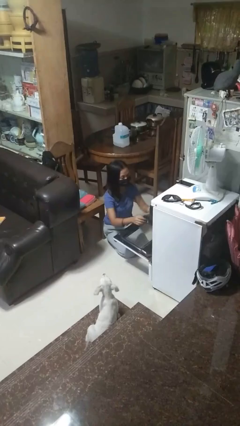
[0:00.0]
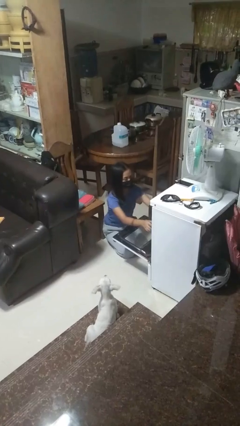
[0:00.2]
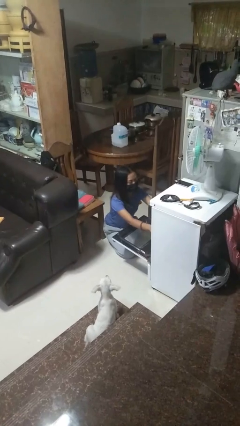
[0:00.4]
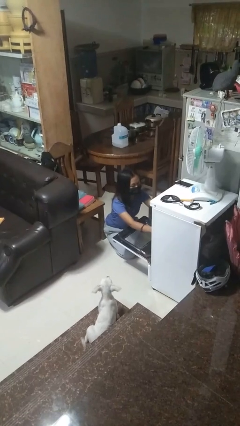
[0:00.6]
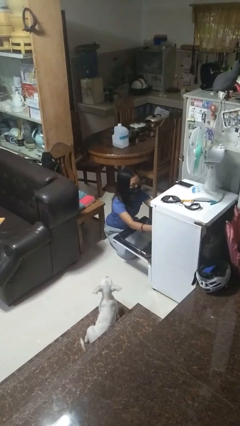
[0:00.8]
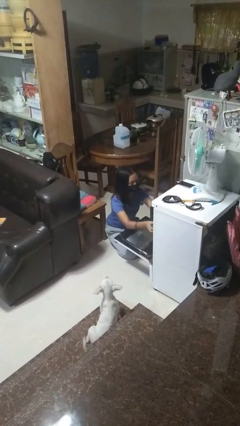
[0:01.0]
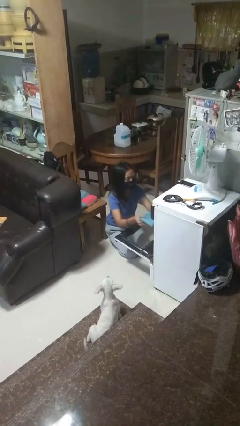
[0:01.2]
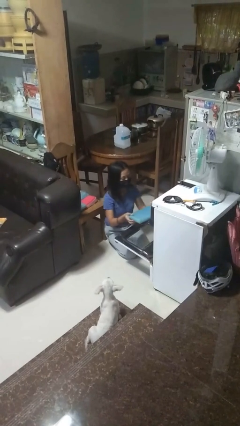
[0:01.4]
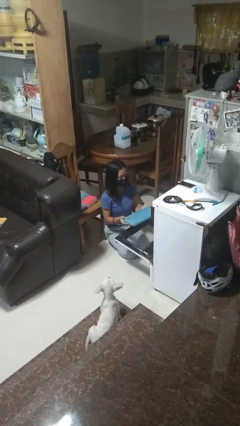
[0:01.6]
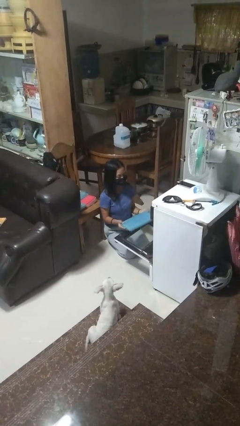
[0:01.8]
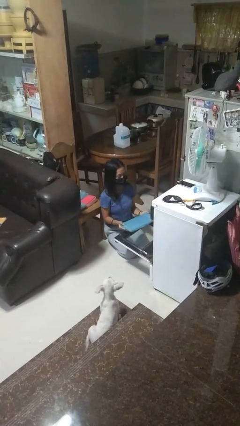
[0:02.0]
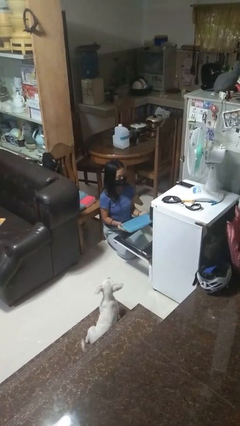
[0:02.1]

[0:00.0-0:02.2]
person takes object from oven

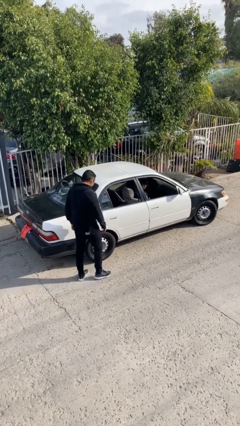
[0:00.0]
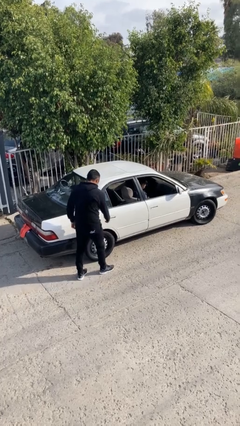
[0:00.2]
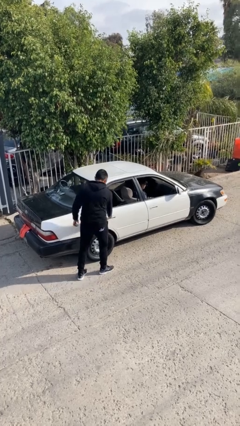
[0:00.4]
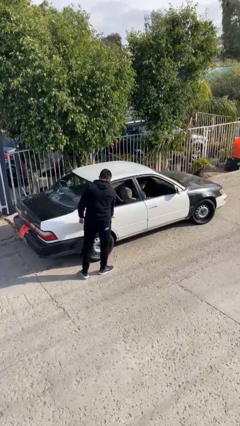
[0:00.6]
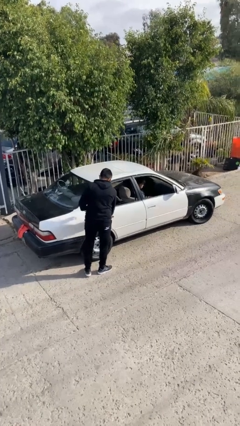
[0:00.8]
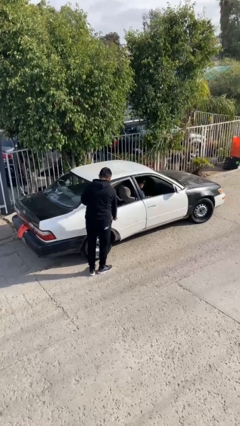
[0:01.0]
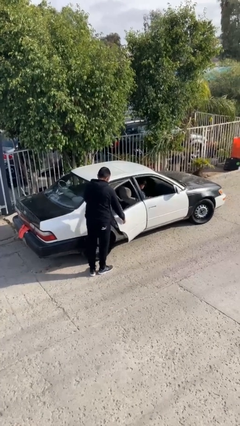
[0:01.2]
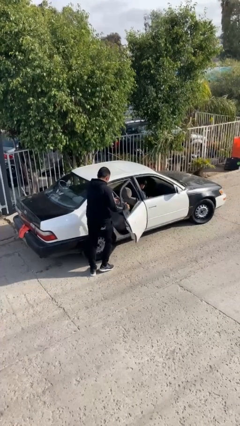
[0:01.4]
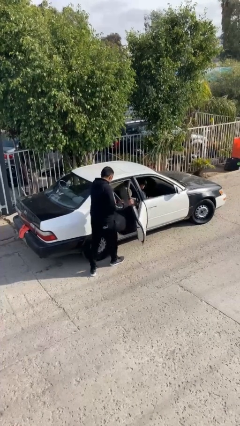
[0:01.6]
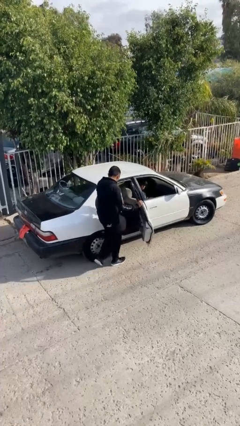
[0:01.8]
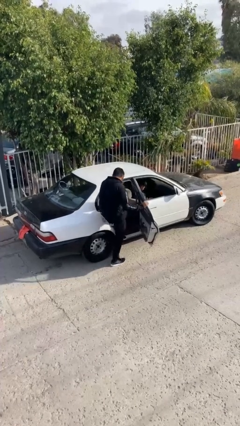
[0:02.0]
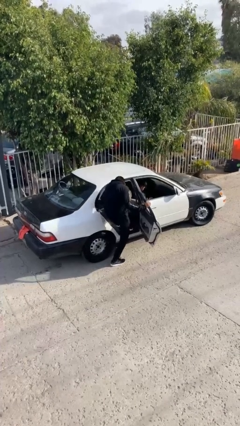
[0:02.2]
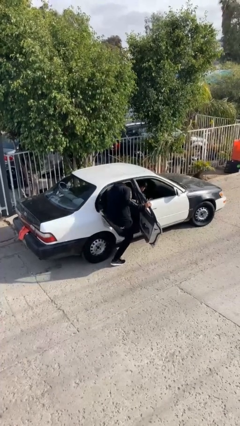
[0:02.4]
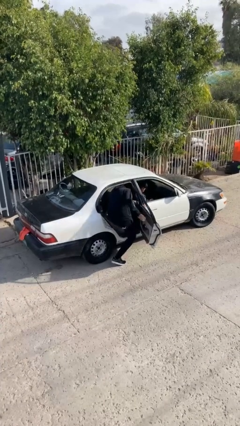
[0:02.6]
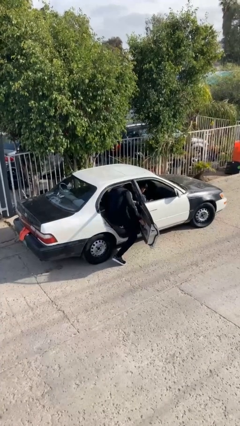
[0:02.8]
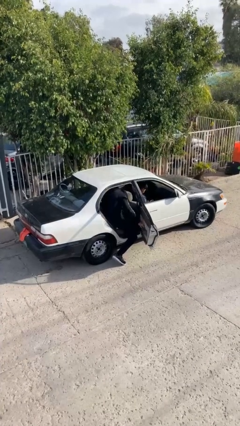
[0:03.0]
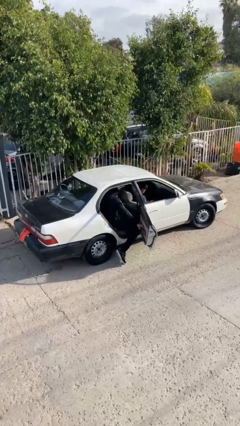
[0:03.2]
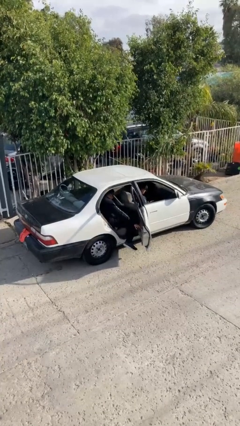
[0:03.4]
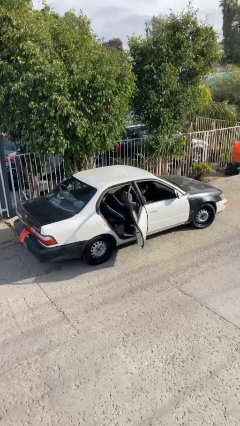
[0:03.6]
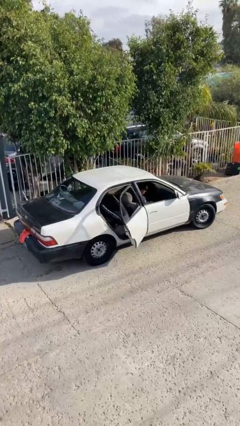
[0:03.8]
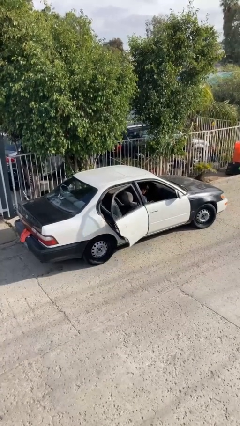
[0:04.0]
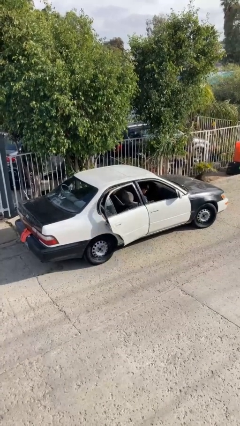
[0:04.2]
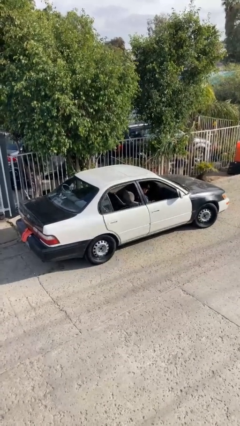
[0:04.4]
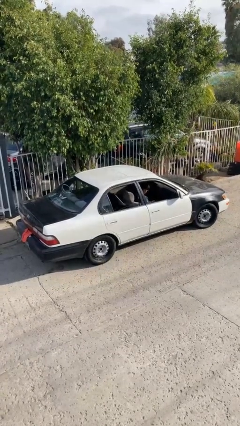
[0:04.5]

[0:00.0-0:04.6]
car picks up person

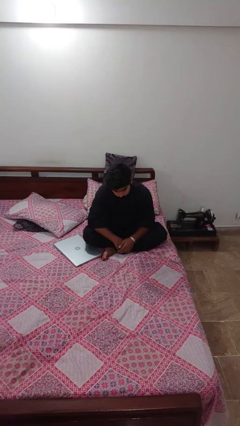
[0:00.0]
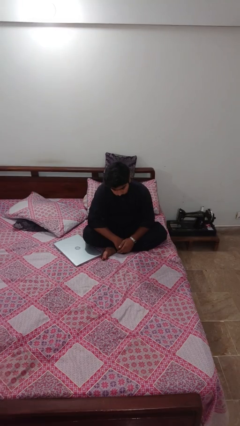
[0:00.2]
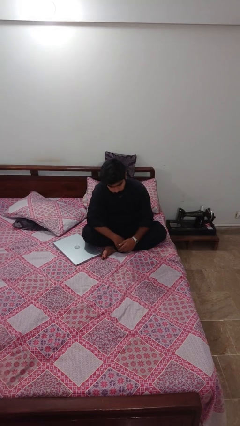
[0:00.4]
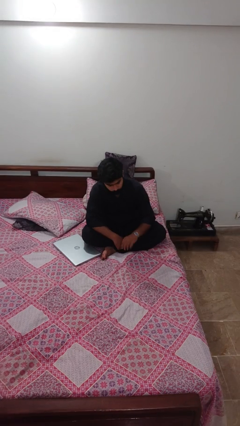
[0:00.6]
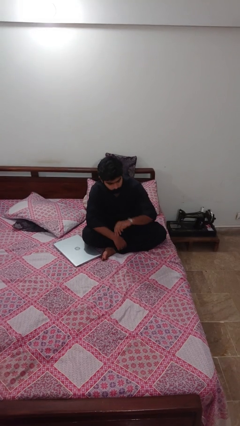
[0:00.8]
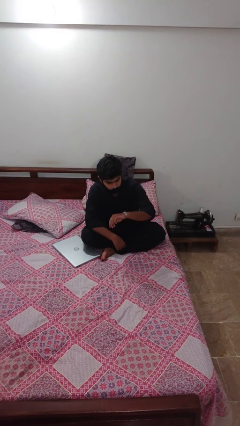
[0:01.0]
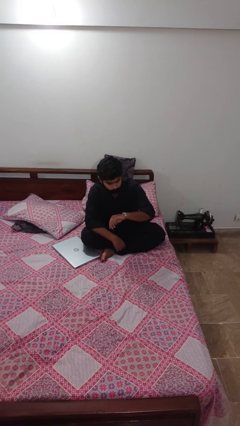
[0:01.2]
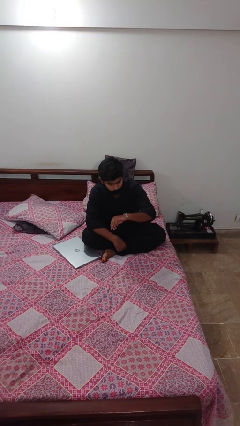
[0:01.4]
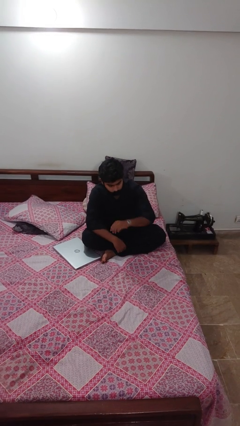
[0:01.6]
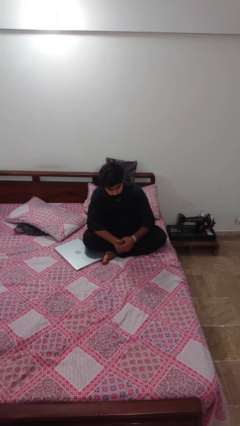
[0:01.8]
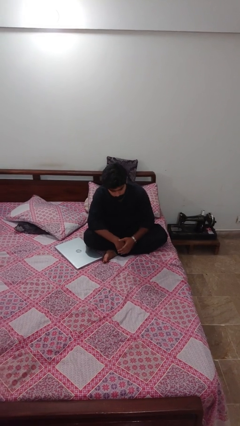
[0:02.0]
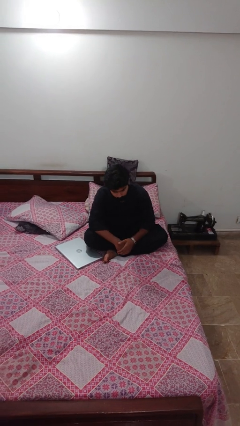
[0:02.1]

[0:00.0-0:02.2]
person looks at wristwatch

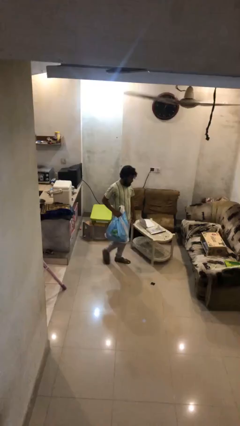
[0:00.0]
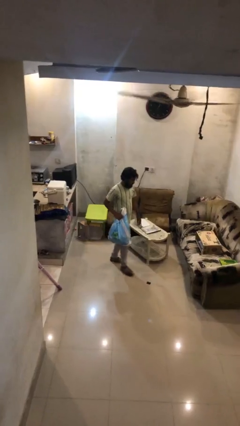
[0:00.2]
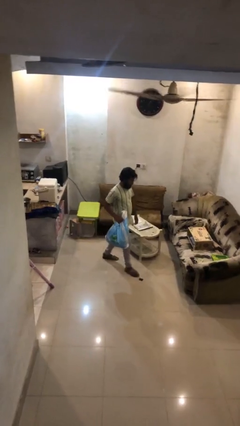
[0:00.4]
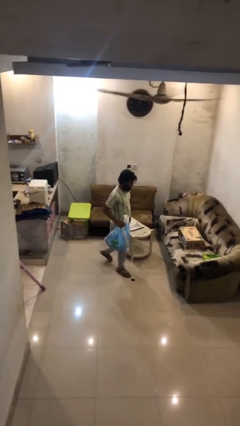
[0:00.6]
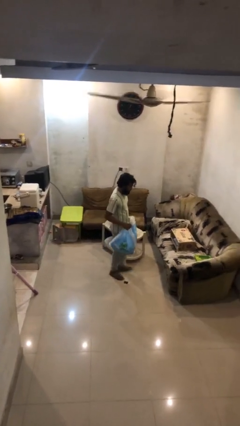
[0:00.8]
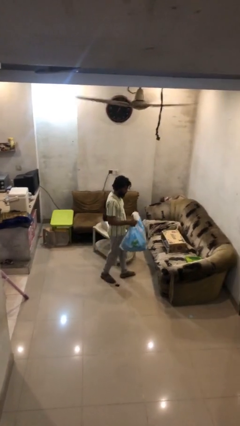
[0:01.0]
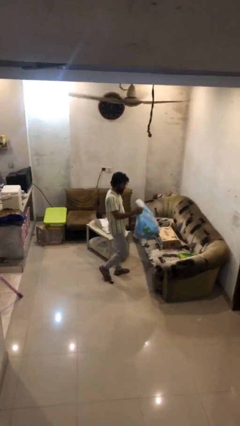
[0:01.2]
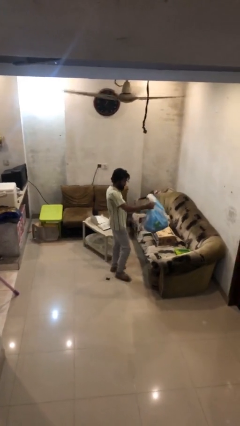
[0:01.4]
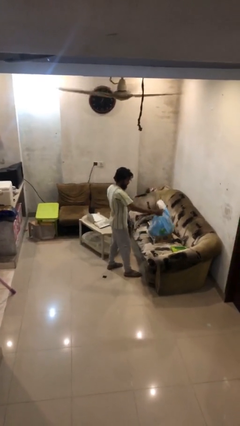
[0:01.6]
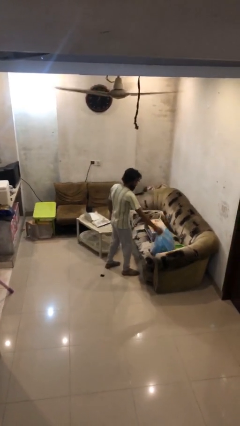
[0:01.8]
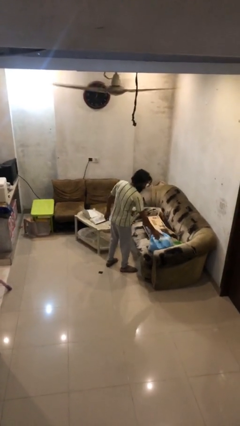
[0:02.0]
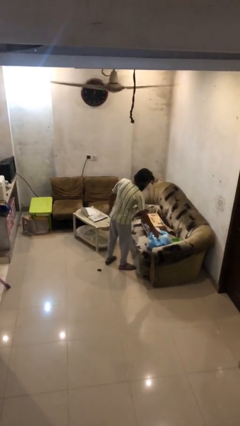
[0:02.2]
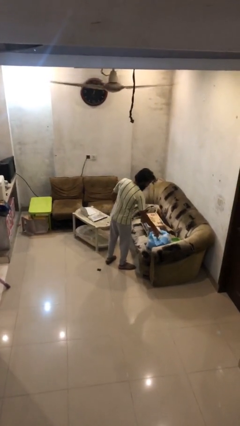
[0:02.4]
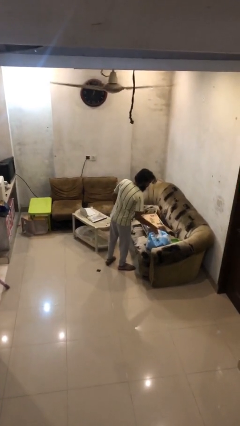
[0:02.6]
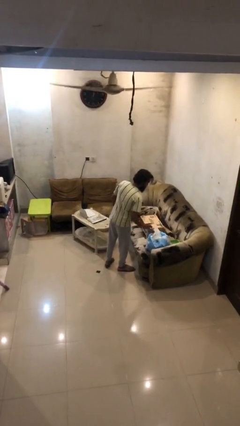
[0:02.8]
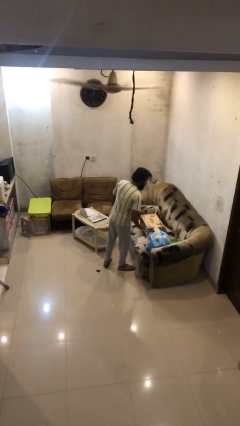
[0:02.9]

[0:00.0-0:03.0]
person puts down object on table

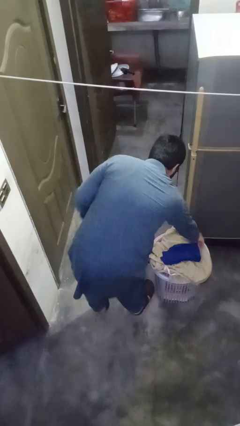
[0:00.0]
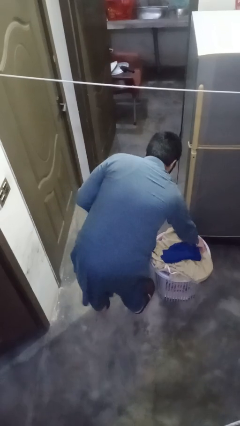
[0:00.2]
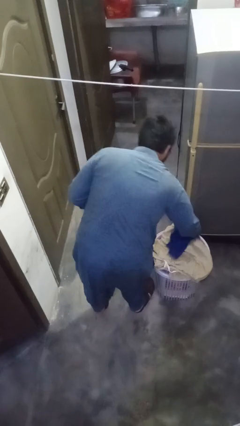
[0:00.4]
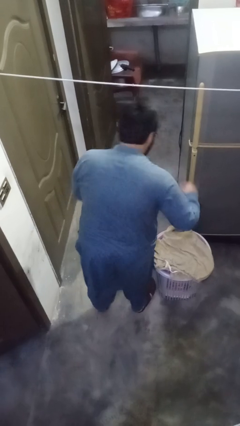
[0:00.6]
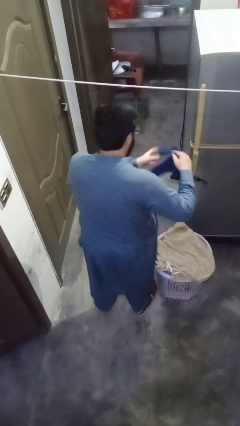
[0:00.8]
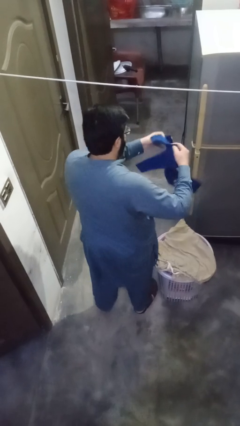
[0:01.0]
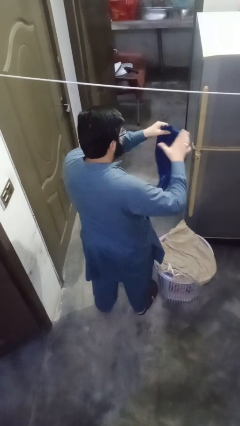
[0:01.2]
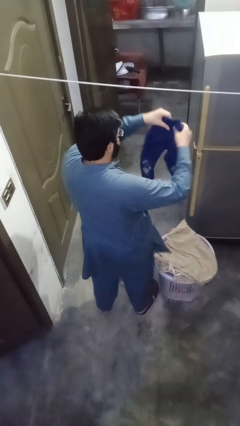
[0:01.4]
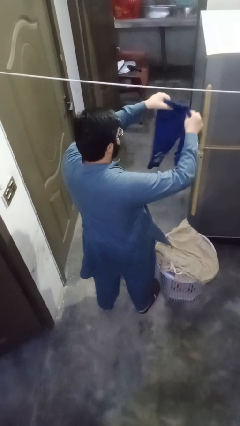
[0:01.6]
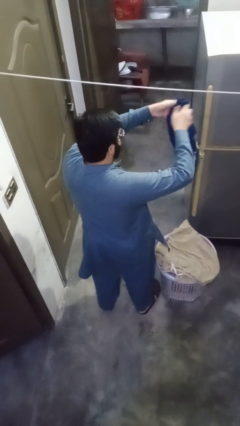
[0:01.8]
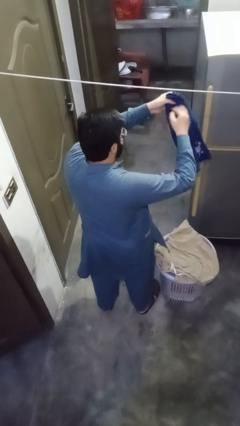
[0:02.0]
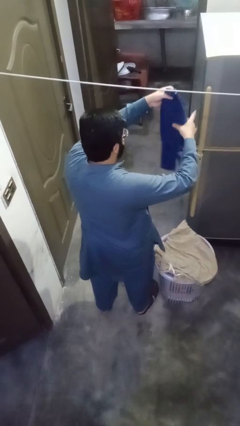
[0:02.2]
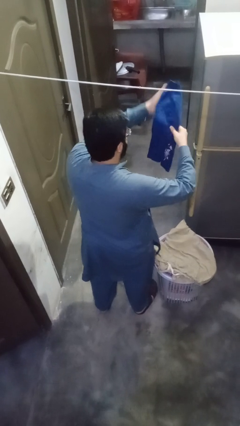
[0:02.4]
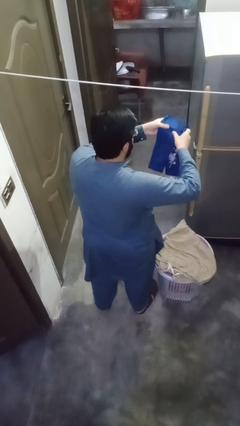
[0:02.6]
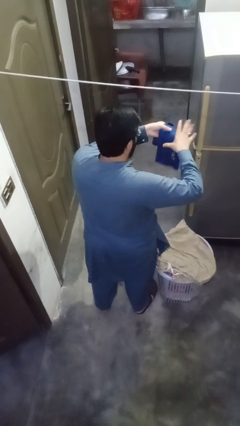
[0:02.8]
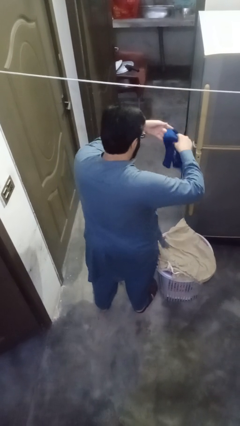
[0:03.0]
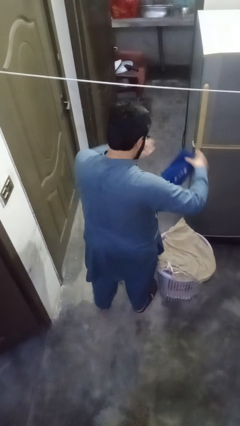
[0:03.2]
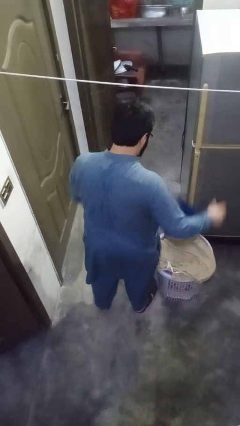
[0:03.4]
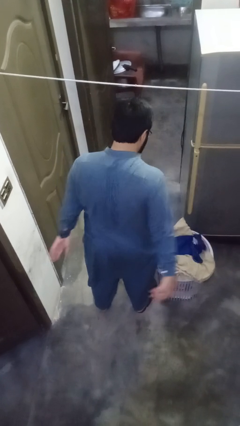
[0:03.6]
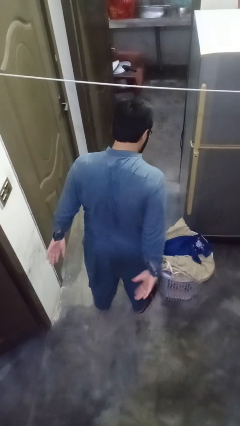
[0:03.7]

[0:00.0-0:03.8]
person folds pants

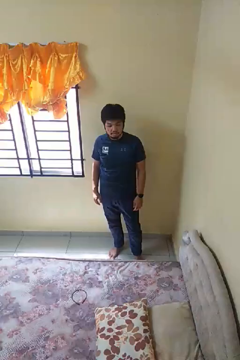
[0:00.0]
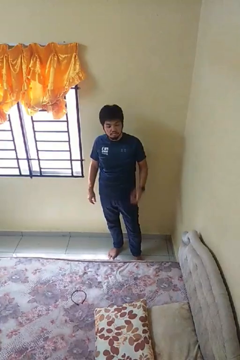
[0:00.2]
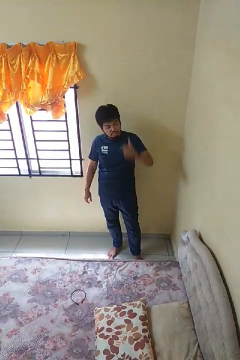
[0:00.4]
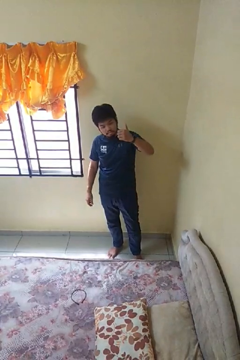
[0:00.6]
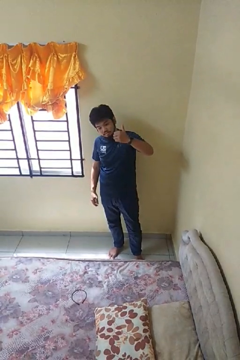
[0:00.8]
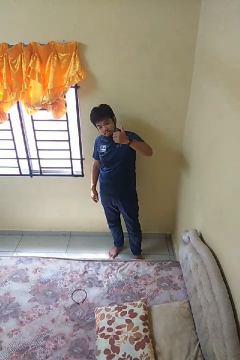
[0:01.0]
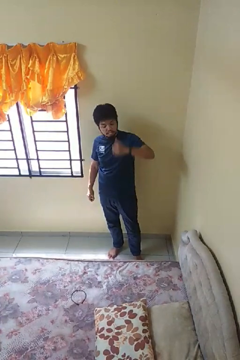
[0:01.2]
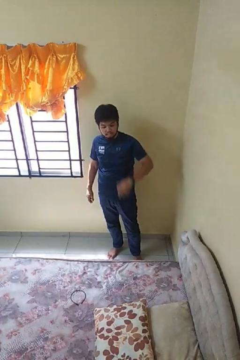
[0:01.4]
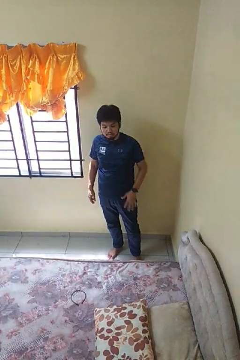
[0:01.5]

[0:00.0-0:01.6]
person gestures thumbs up

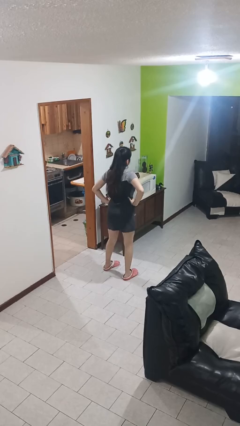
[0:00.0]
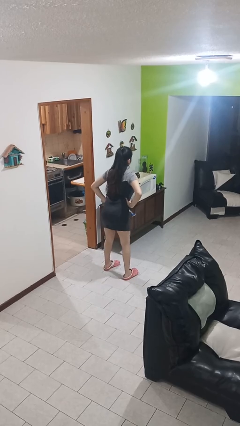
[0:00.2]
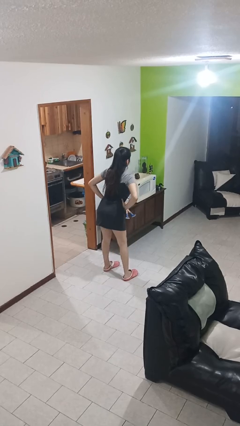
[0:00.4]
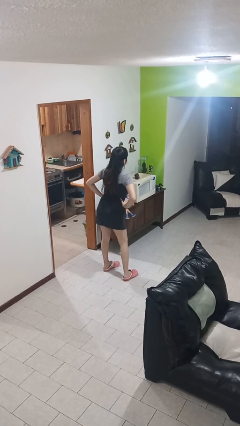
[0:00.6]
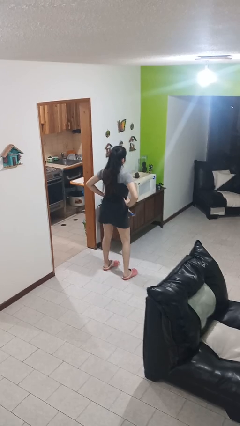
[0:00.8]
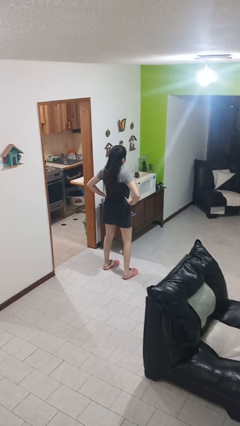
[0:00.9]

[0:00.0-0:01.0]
person wiggles hips
